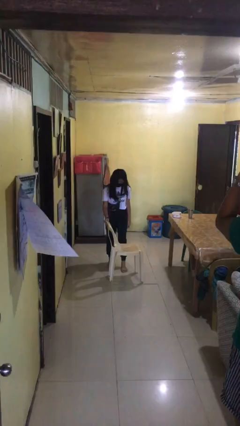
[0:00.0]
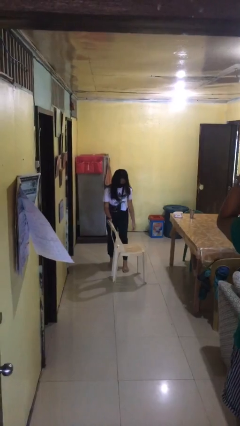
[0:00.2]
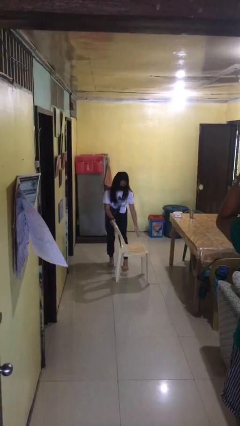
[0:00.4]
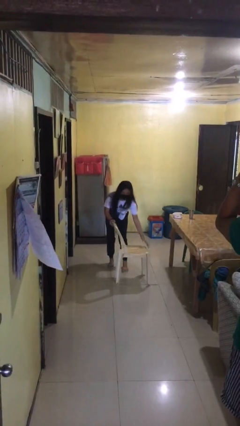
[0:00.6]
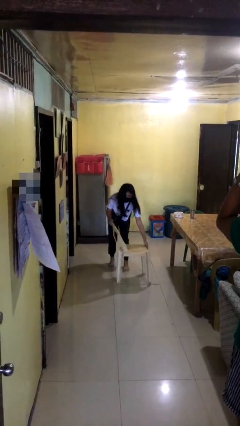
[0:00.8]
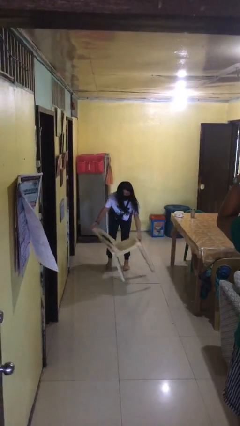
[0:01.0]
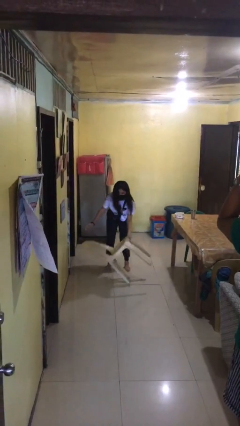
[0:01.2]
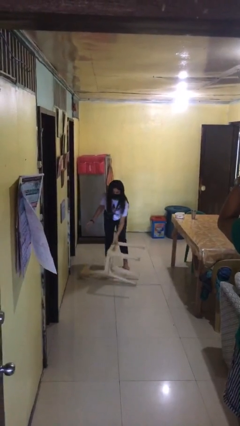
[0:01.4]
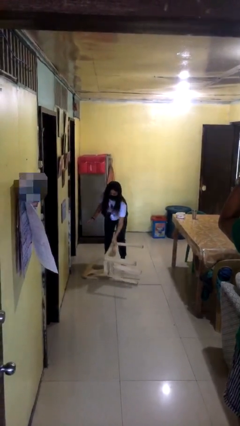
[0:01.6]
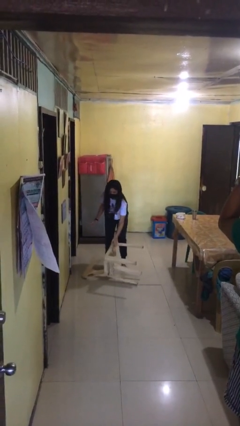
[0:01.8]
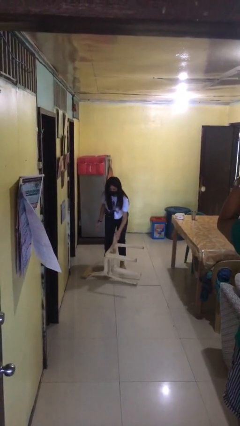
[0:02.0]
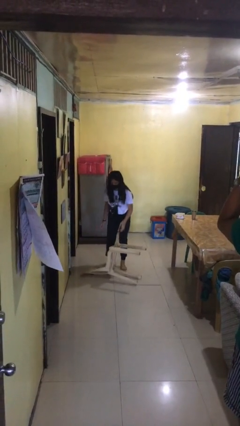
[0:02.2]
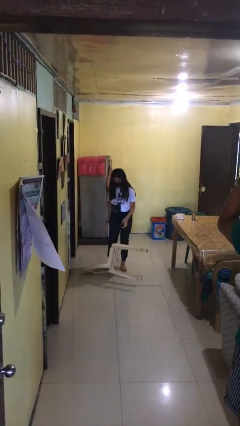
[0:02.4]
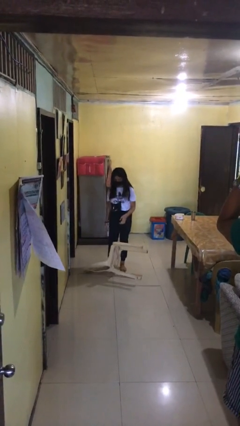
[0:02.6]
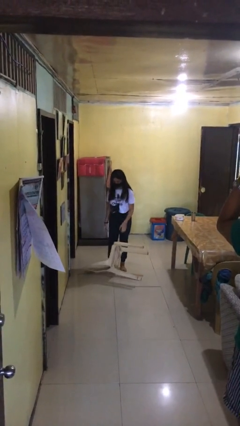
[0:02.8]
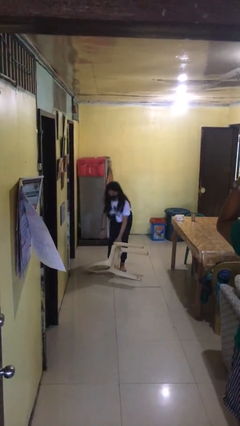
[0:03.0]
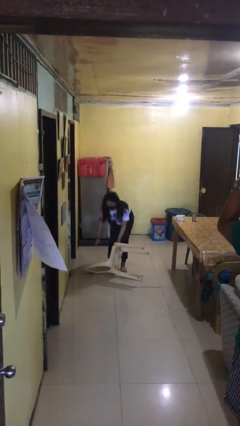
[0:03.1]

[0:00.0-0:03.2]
person knocks over furniture

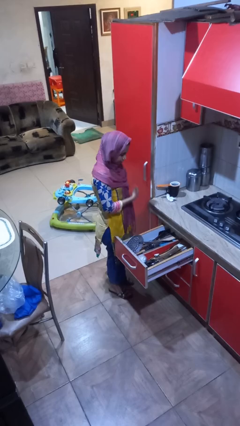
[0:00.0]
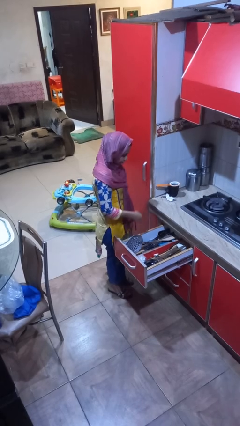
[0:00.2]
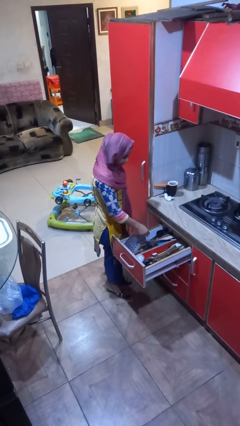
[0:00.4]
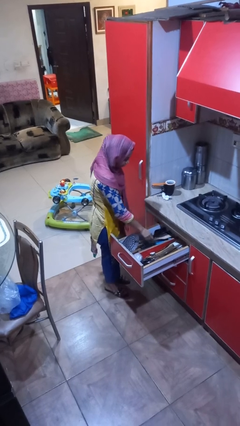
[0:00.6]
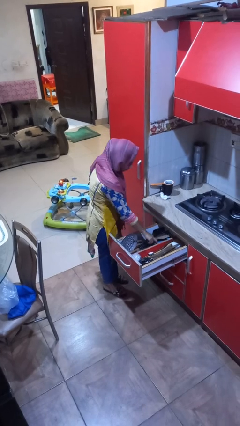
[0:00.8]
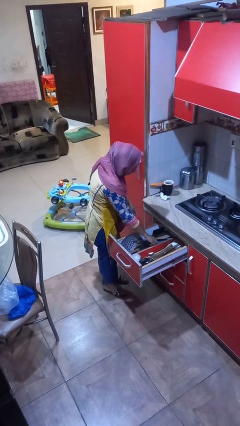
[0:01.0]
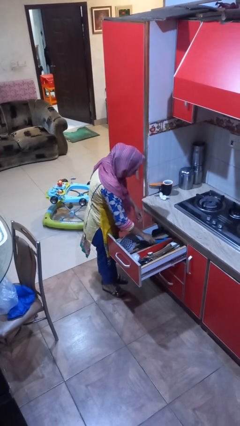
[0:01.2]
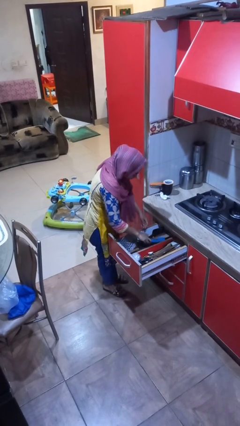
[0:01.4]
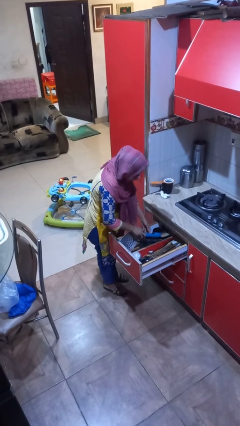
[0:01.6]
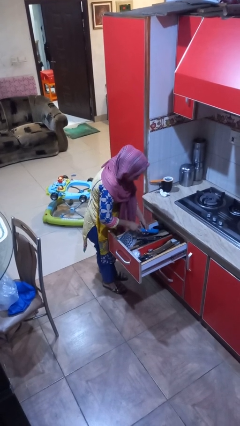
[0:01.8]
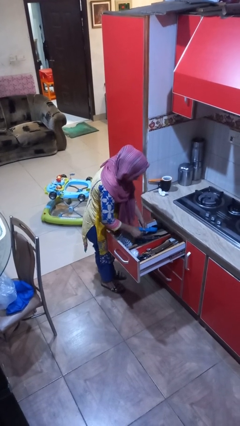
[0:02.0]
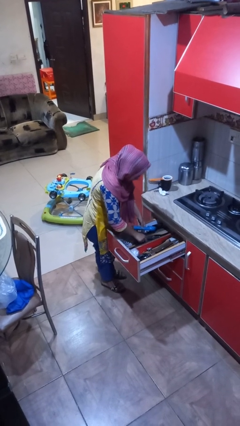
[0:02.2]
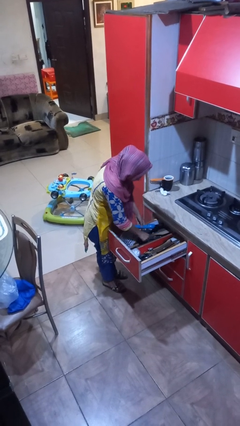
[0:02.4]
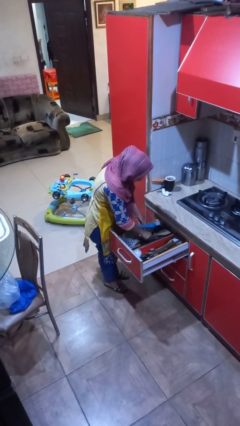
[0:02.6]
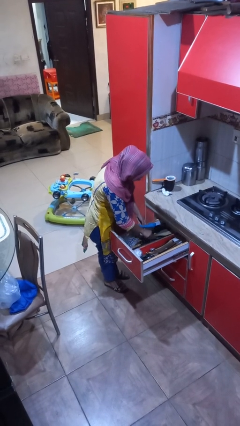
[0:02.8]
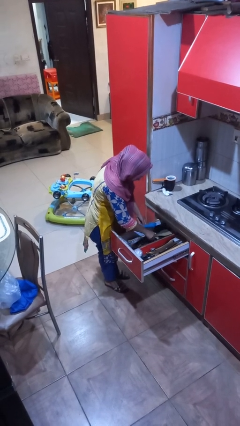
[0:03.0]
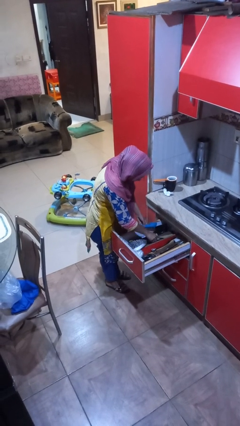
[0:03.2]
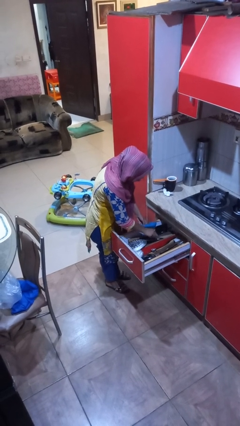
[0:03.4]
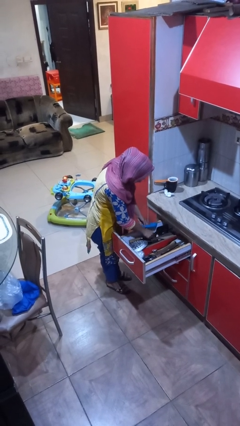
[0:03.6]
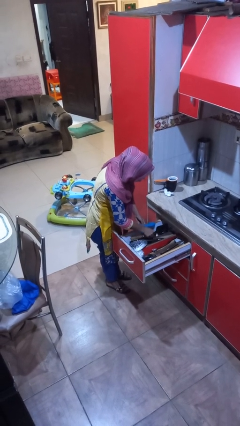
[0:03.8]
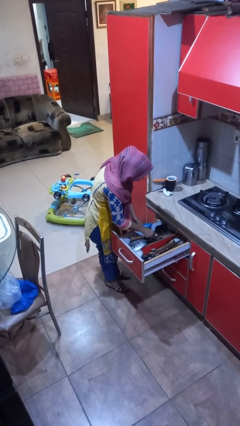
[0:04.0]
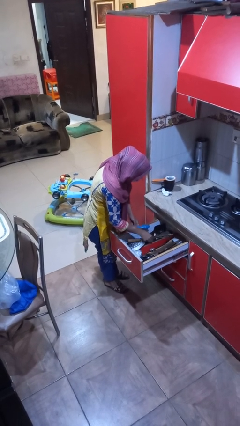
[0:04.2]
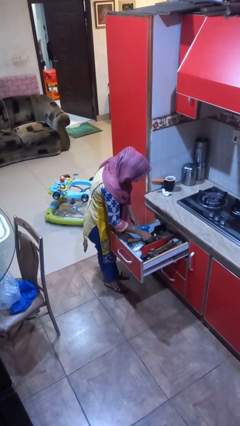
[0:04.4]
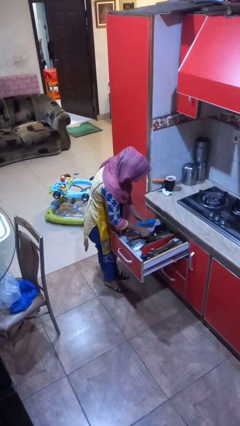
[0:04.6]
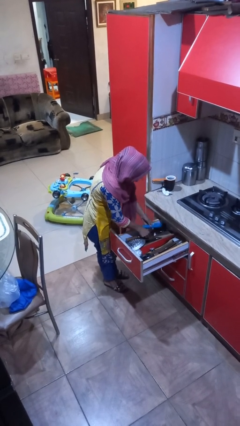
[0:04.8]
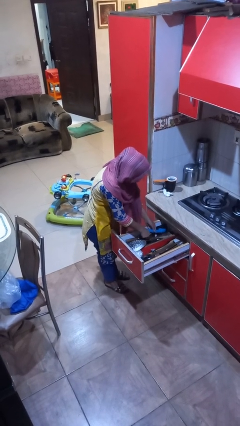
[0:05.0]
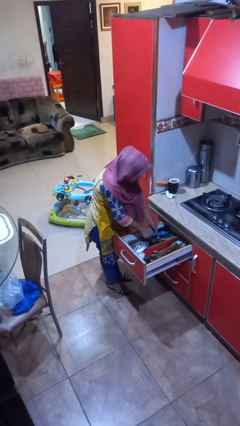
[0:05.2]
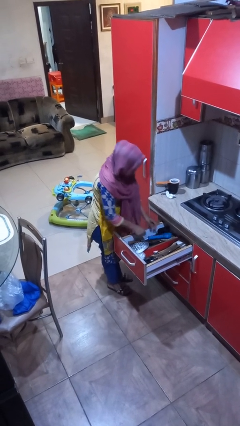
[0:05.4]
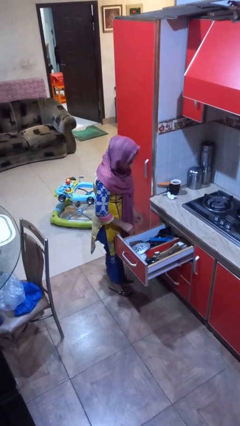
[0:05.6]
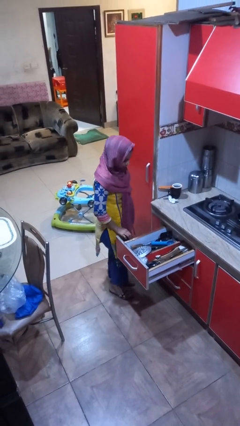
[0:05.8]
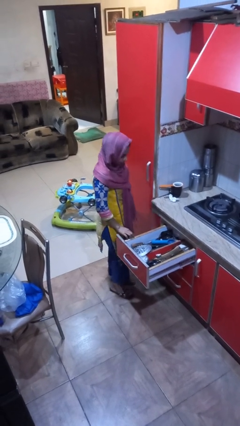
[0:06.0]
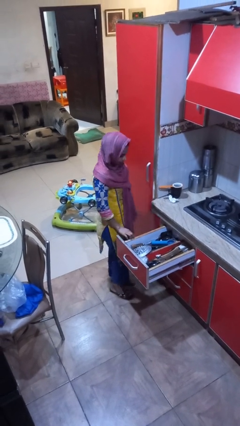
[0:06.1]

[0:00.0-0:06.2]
person searches in kitchen drawer

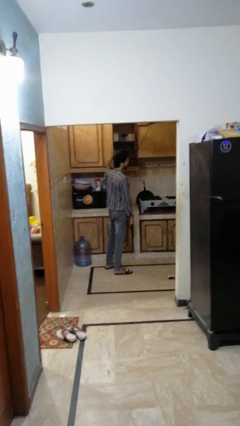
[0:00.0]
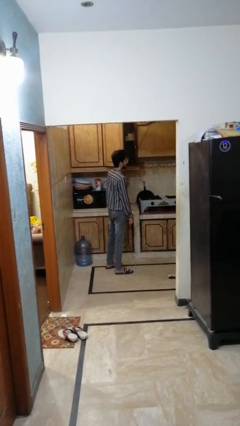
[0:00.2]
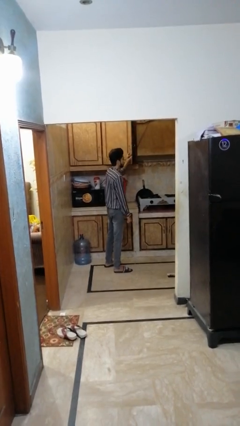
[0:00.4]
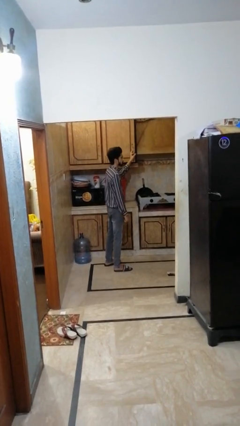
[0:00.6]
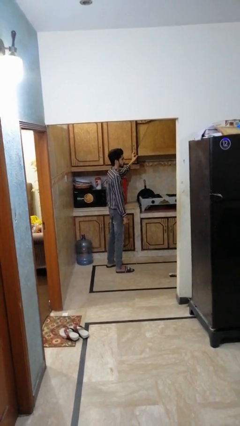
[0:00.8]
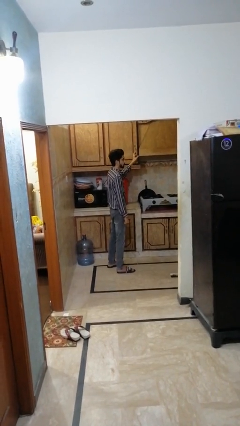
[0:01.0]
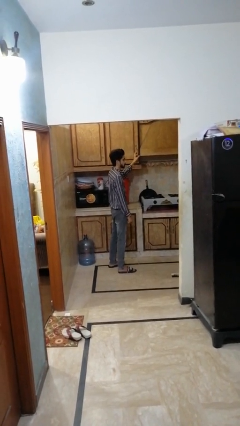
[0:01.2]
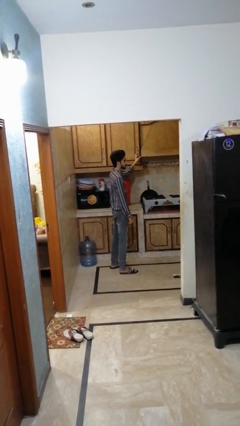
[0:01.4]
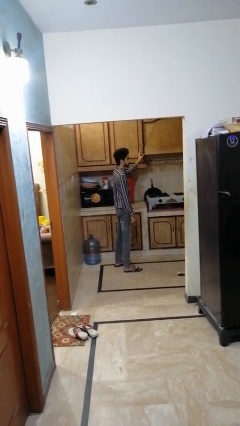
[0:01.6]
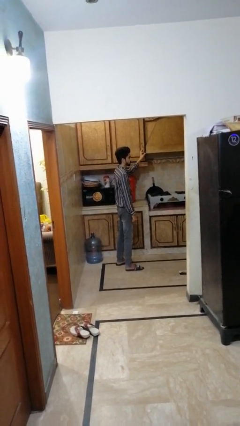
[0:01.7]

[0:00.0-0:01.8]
person closes cabinet

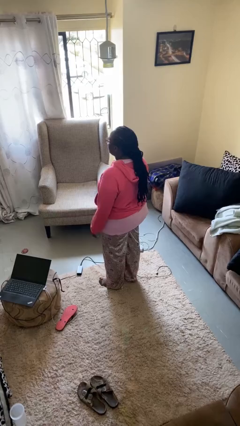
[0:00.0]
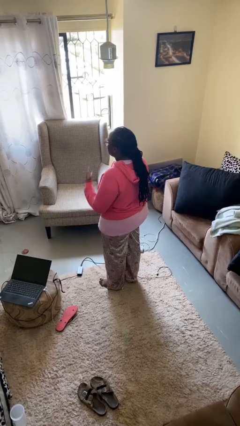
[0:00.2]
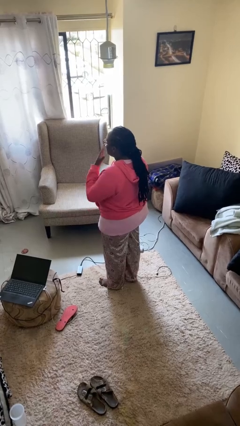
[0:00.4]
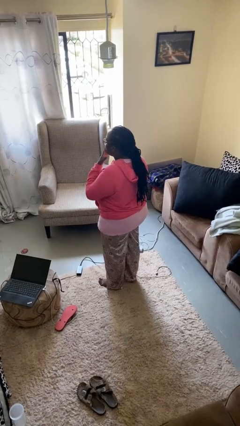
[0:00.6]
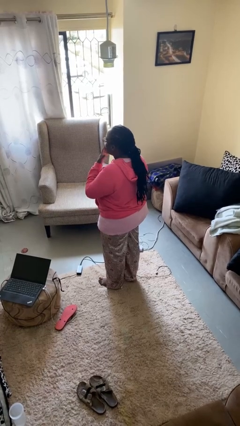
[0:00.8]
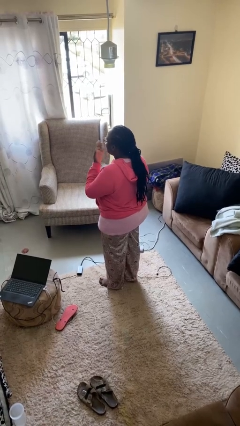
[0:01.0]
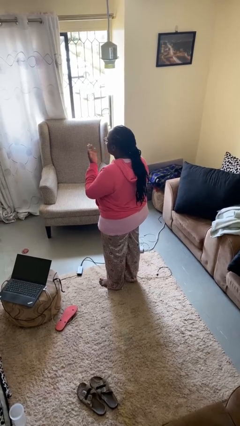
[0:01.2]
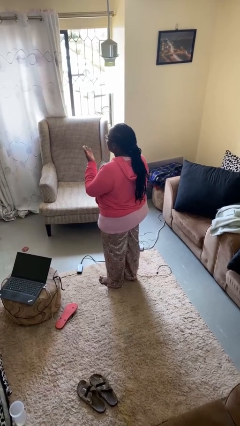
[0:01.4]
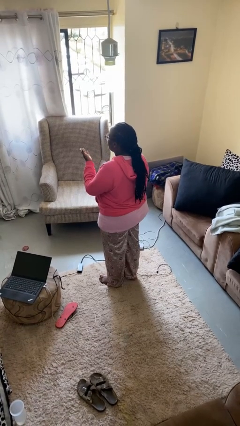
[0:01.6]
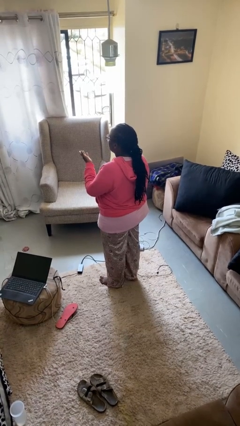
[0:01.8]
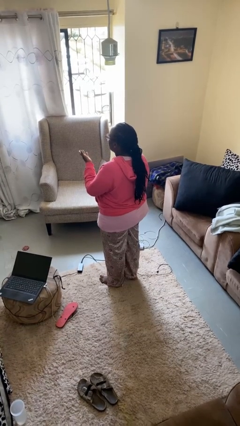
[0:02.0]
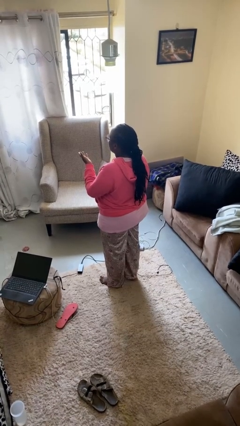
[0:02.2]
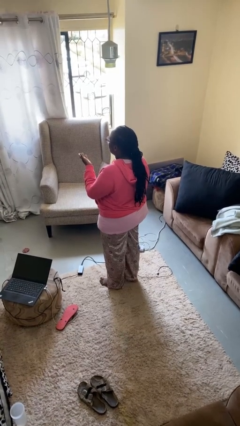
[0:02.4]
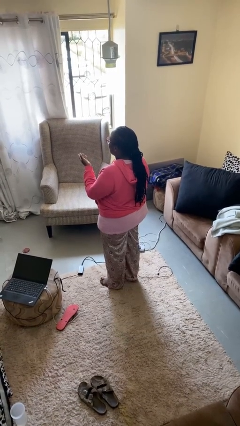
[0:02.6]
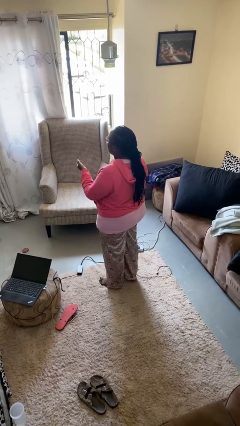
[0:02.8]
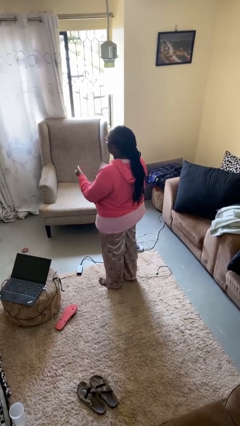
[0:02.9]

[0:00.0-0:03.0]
person gestures blow kiss

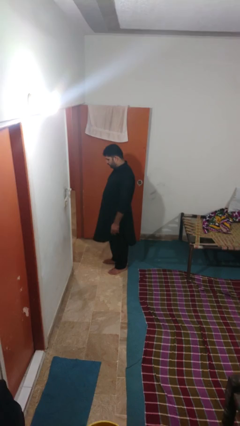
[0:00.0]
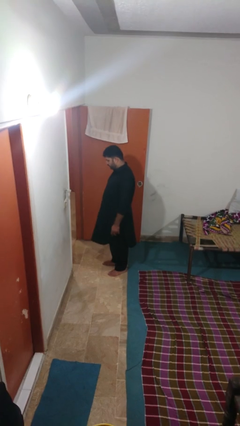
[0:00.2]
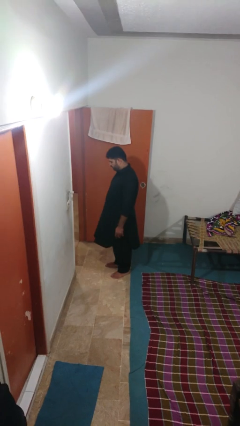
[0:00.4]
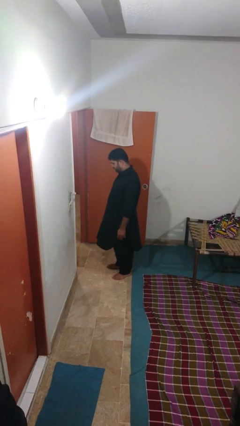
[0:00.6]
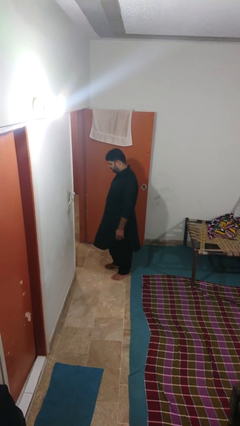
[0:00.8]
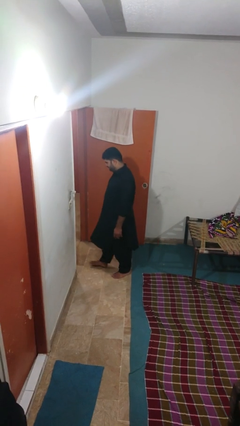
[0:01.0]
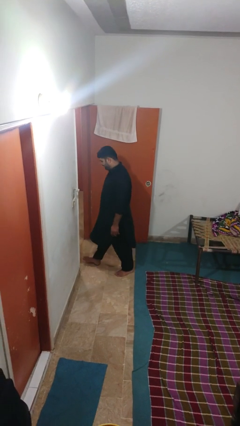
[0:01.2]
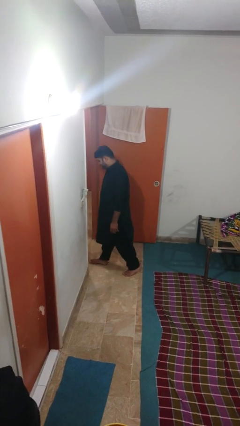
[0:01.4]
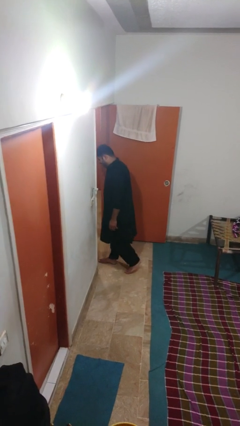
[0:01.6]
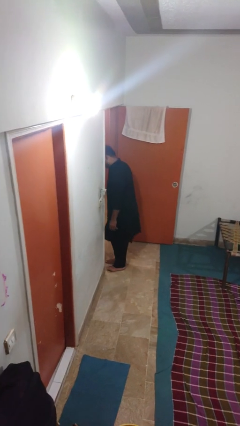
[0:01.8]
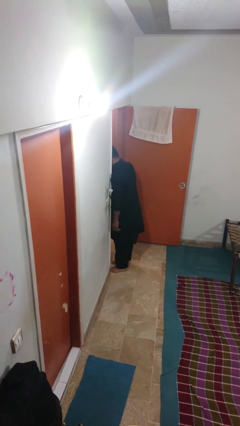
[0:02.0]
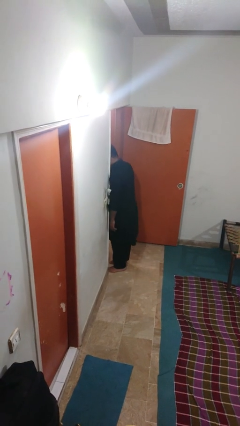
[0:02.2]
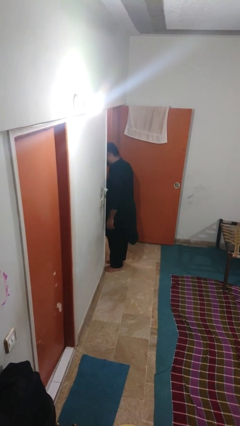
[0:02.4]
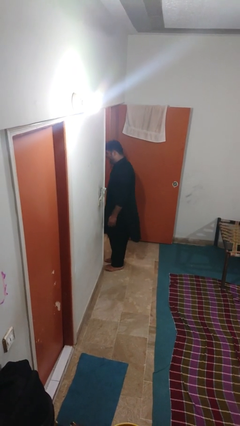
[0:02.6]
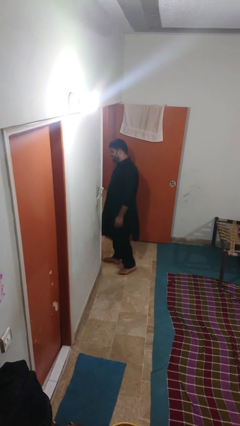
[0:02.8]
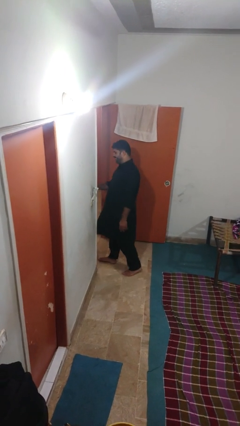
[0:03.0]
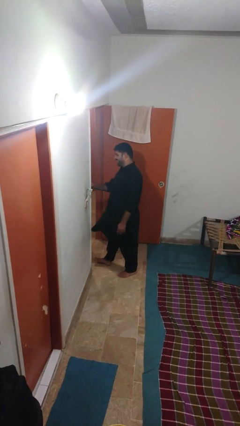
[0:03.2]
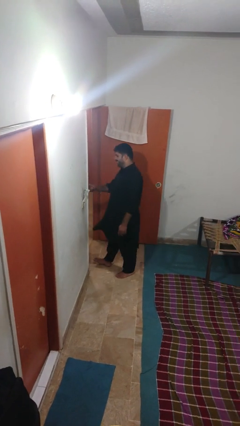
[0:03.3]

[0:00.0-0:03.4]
person bumps into wall
